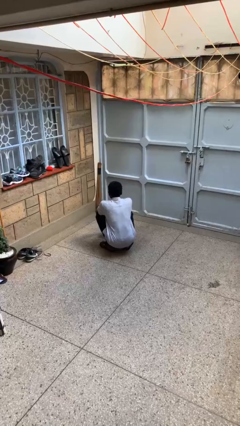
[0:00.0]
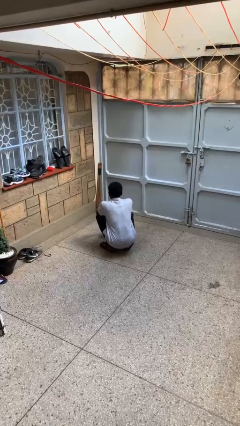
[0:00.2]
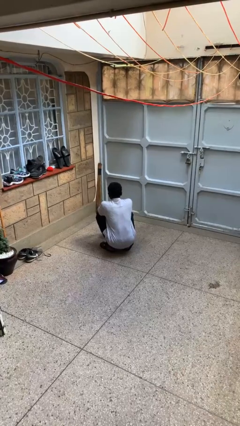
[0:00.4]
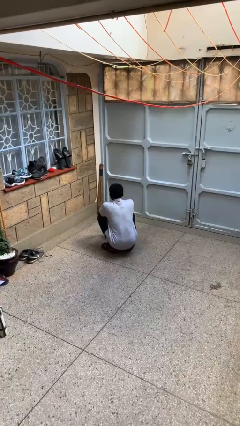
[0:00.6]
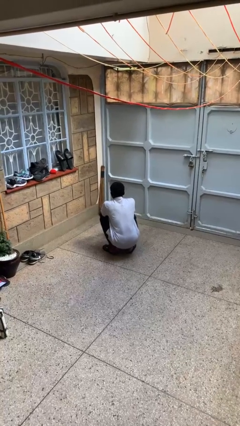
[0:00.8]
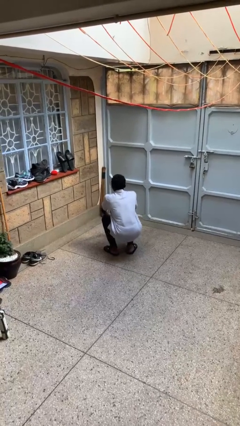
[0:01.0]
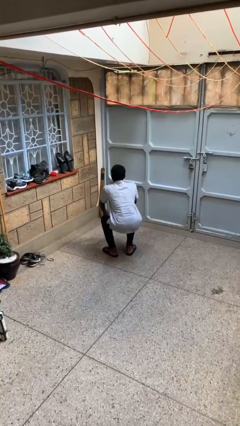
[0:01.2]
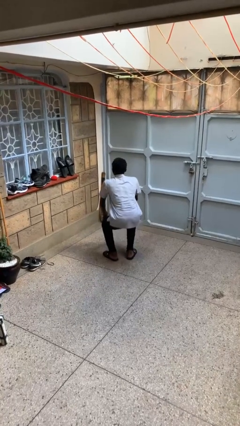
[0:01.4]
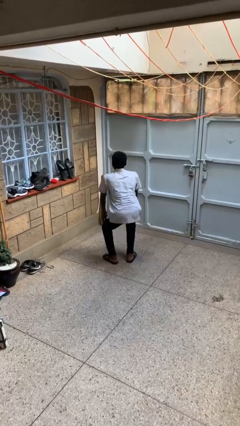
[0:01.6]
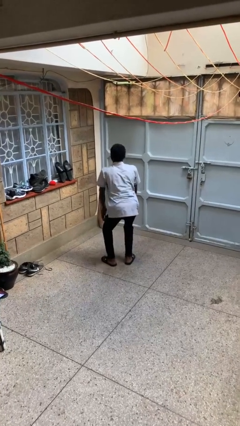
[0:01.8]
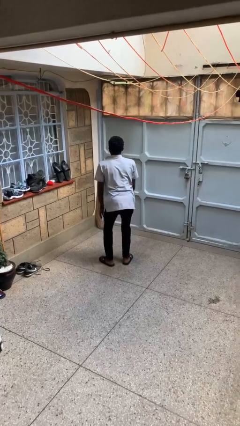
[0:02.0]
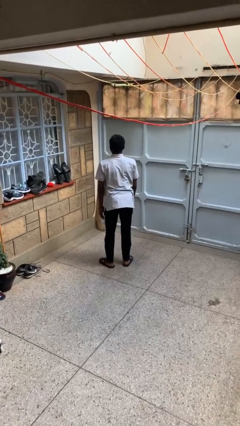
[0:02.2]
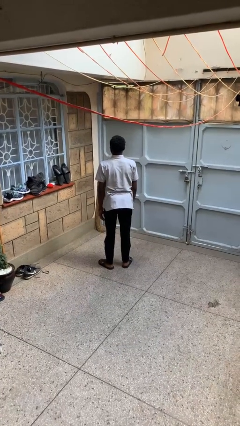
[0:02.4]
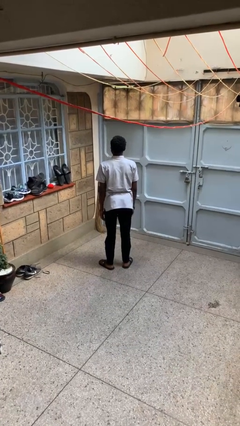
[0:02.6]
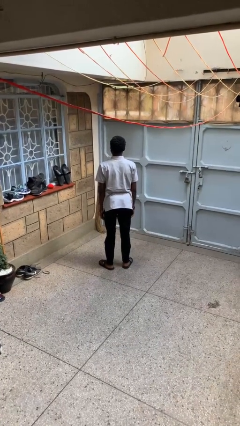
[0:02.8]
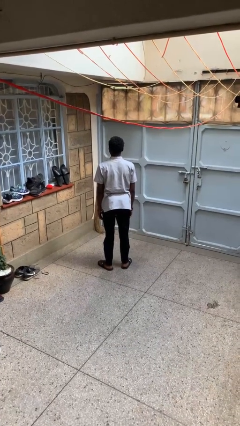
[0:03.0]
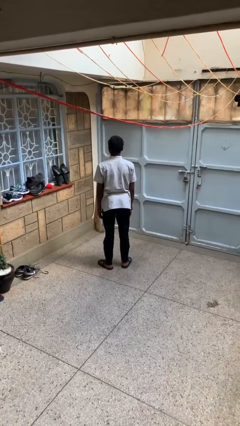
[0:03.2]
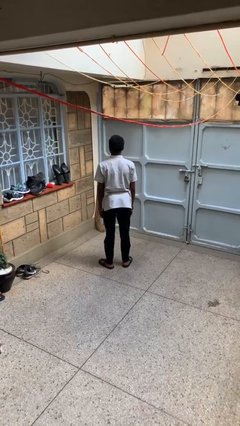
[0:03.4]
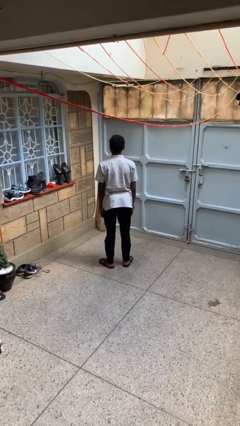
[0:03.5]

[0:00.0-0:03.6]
person stands up

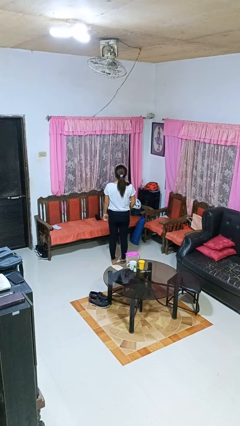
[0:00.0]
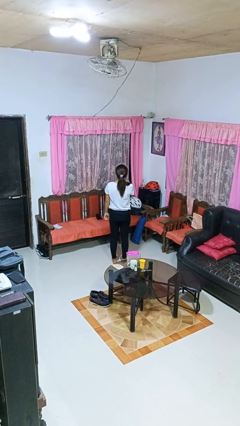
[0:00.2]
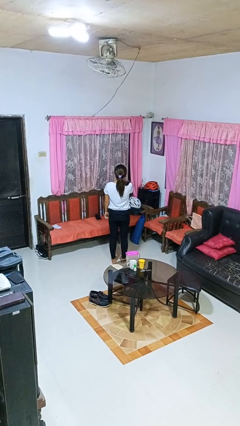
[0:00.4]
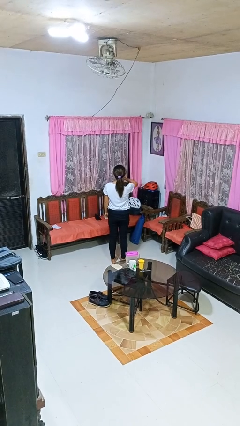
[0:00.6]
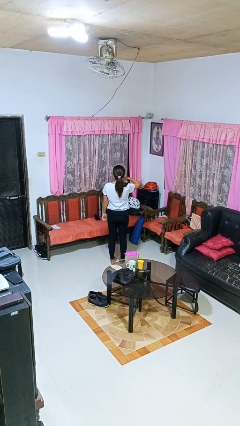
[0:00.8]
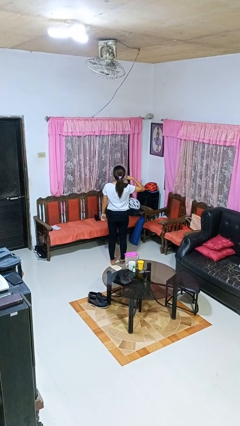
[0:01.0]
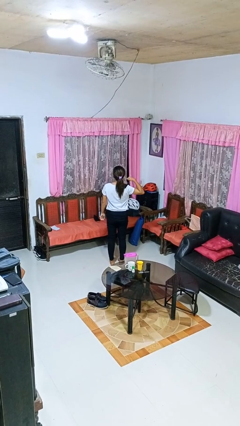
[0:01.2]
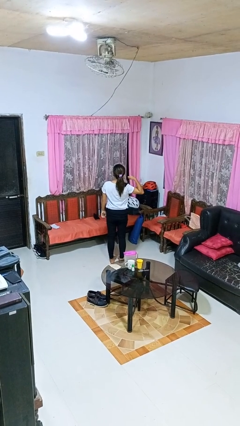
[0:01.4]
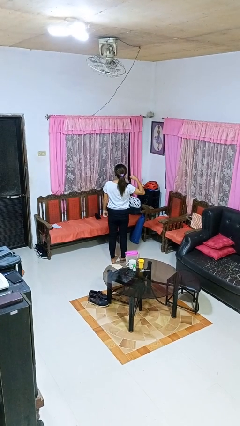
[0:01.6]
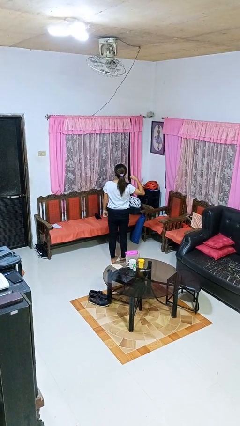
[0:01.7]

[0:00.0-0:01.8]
person gestures cut

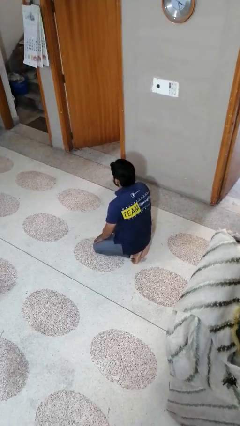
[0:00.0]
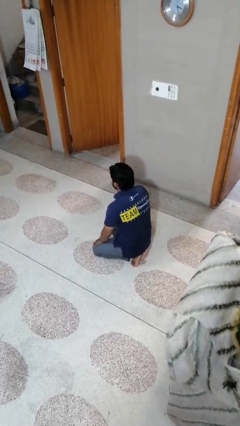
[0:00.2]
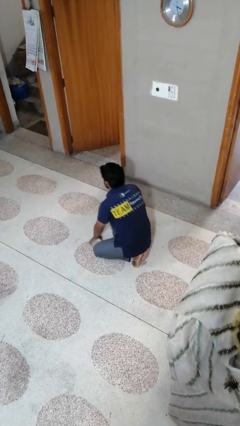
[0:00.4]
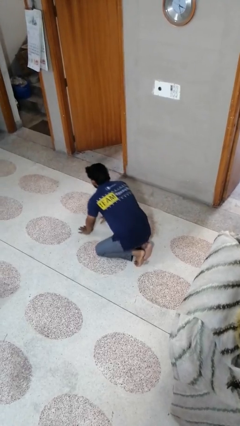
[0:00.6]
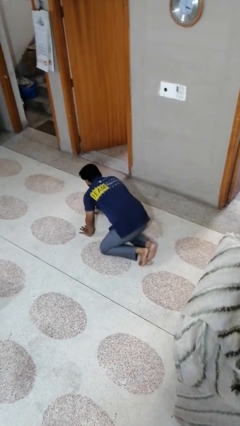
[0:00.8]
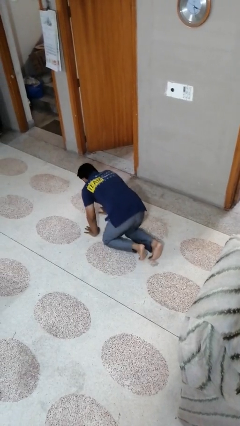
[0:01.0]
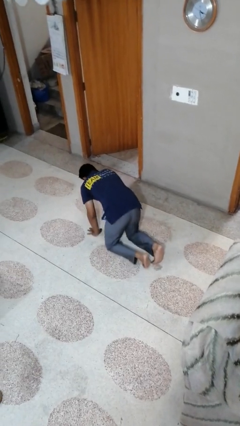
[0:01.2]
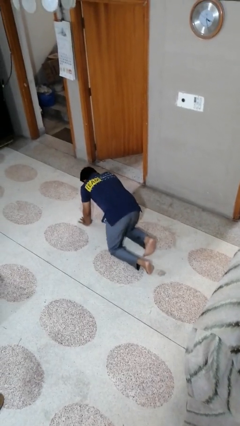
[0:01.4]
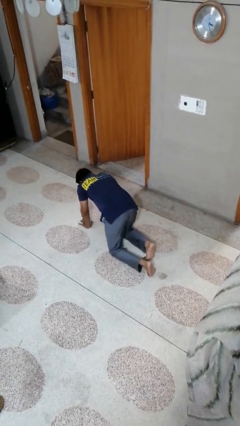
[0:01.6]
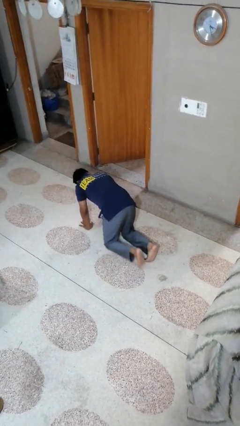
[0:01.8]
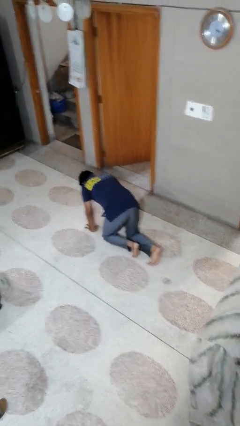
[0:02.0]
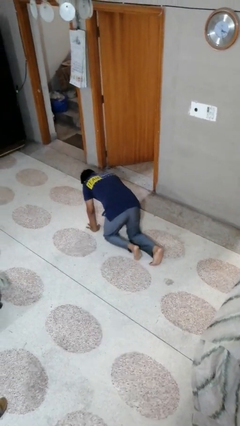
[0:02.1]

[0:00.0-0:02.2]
person crawls

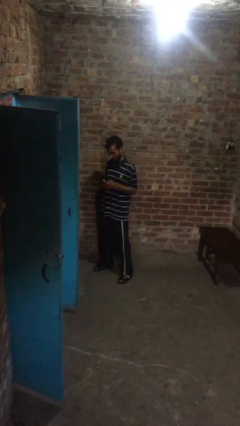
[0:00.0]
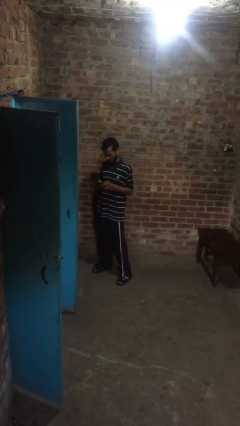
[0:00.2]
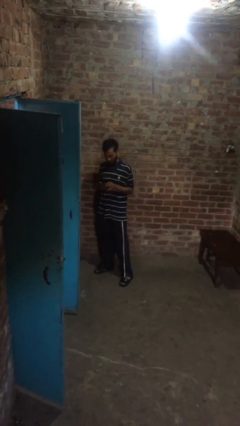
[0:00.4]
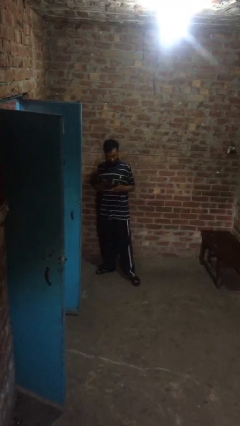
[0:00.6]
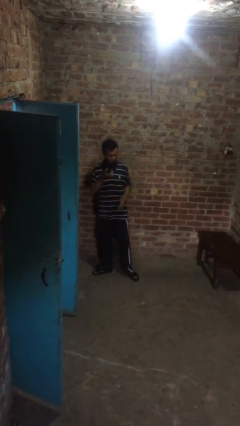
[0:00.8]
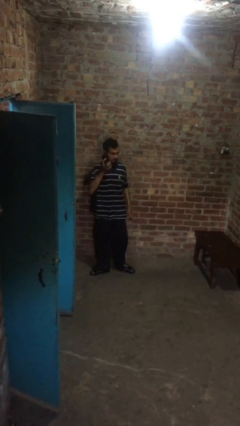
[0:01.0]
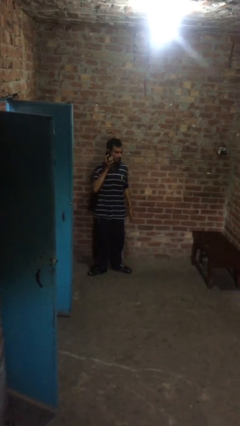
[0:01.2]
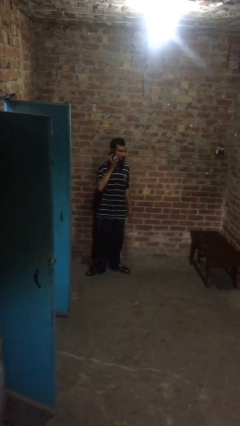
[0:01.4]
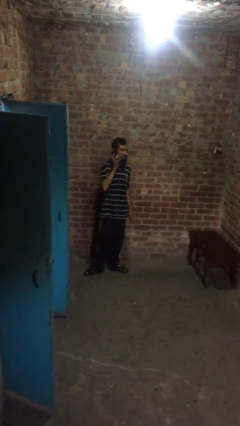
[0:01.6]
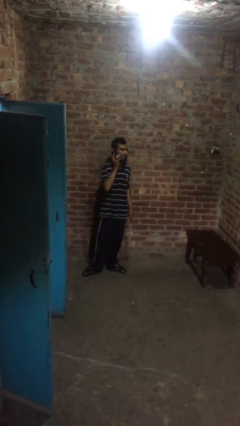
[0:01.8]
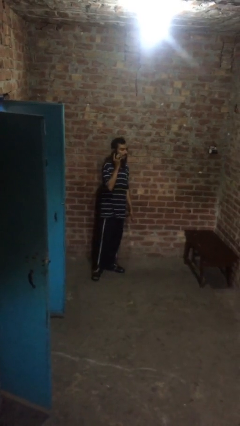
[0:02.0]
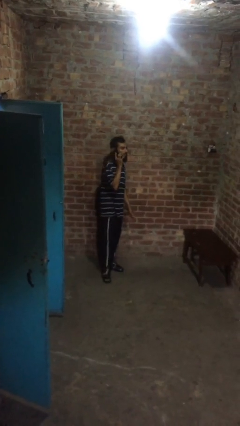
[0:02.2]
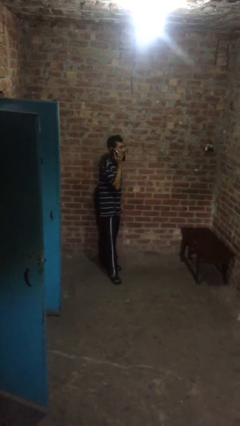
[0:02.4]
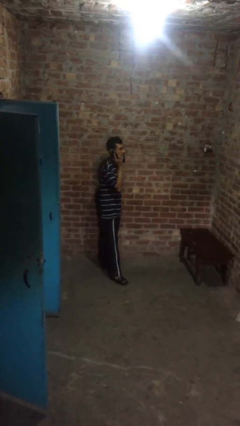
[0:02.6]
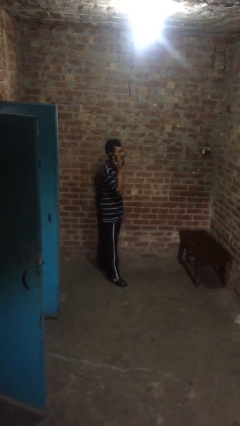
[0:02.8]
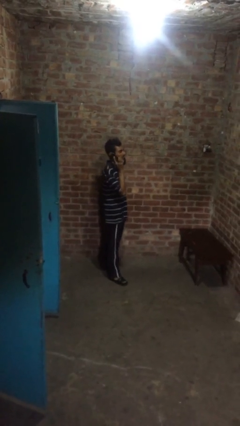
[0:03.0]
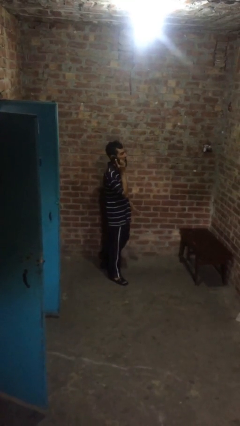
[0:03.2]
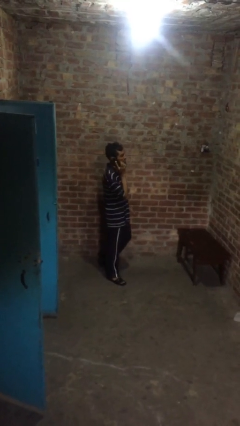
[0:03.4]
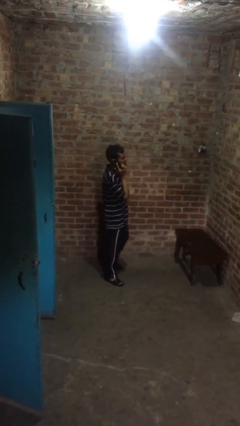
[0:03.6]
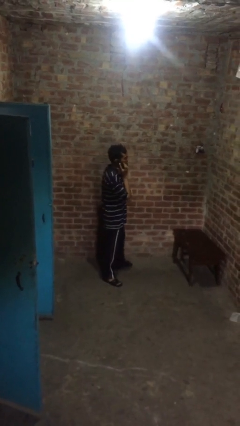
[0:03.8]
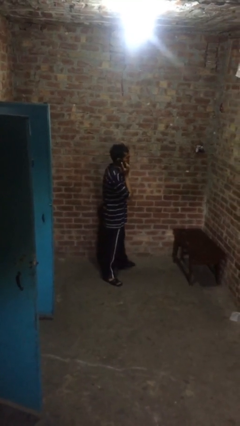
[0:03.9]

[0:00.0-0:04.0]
person talks on phone

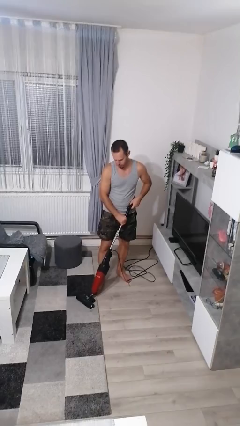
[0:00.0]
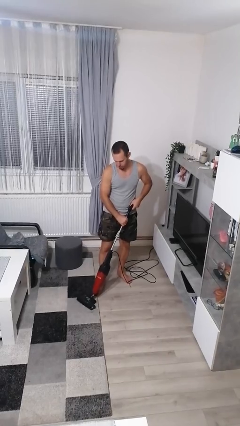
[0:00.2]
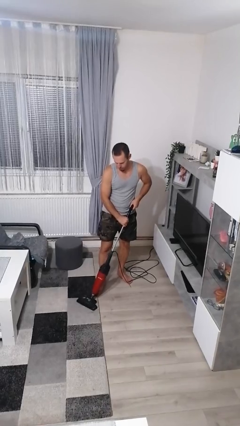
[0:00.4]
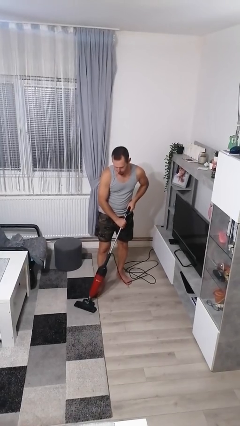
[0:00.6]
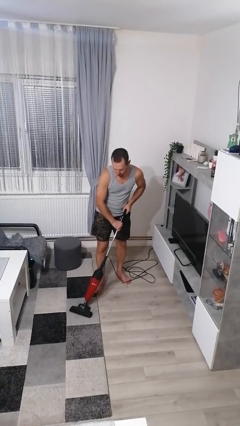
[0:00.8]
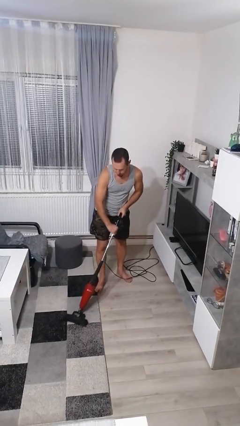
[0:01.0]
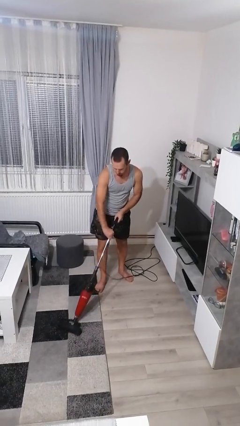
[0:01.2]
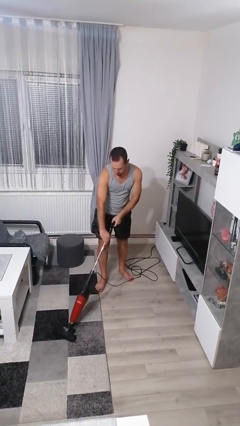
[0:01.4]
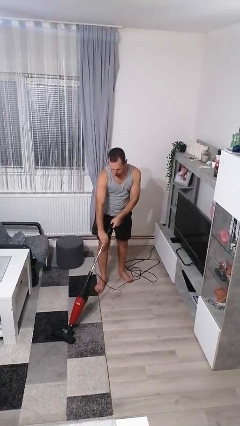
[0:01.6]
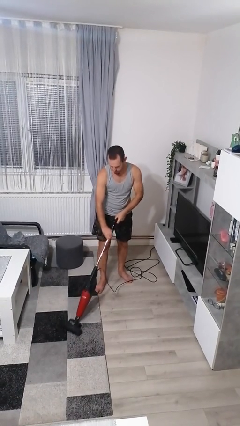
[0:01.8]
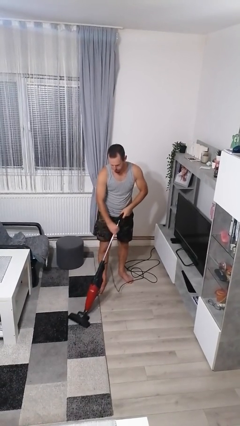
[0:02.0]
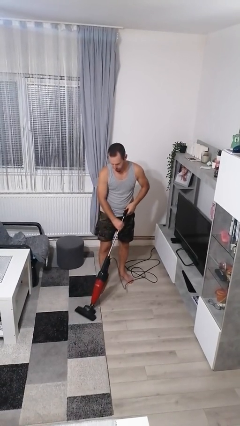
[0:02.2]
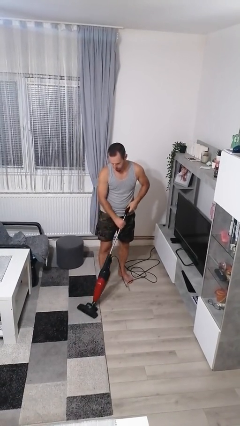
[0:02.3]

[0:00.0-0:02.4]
person vacuums carpet

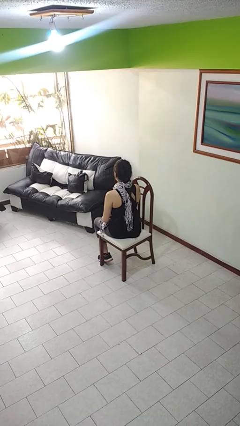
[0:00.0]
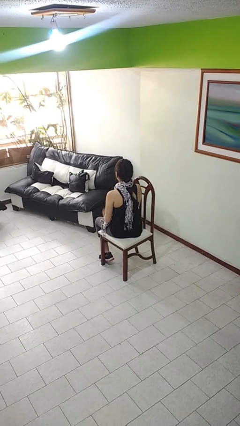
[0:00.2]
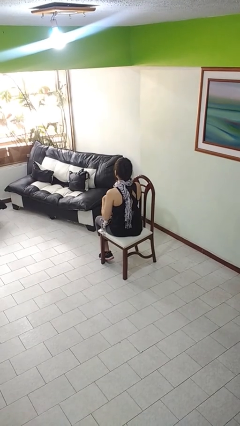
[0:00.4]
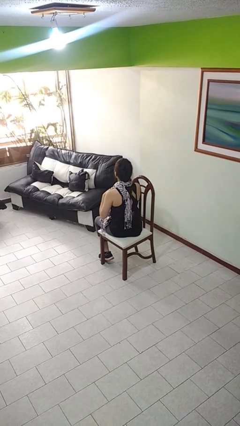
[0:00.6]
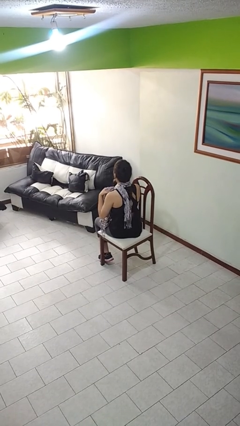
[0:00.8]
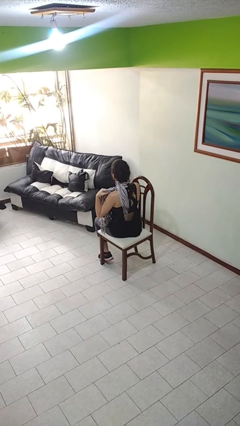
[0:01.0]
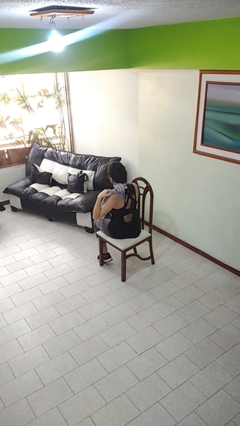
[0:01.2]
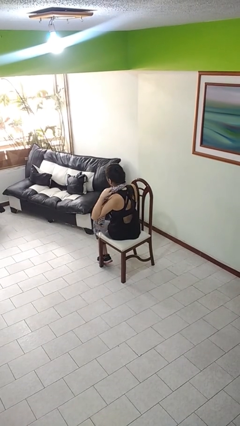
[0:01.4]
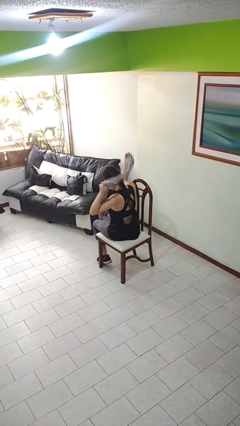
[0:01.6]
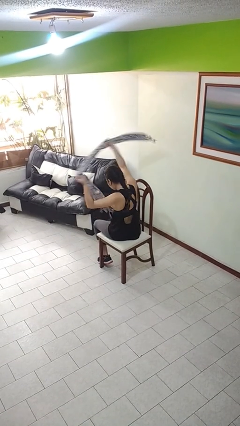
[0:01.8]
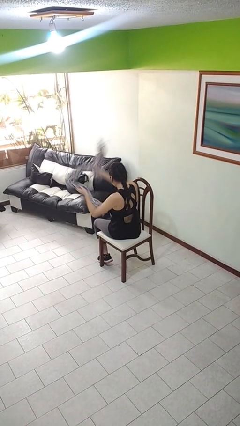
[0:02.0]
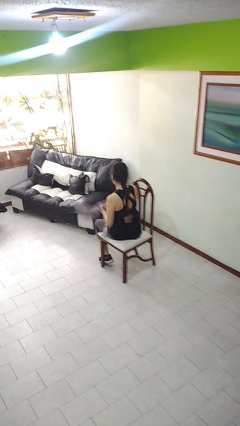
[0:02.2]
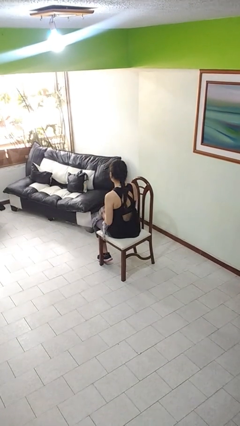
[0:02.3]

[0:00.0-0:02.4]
person takes off scarf

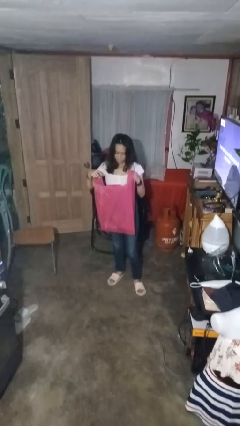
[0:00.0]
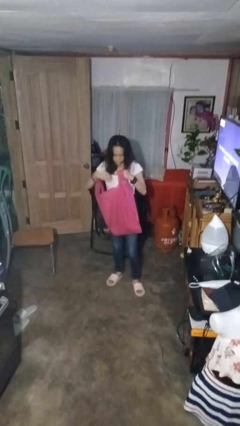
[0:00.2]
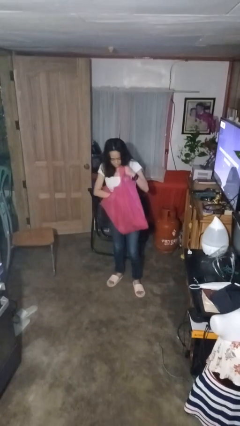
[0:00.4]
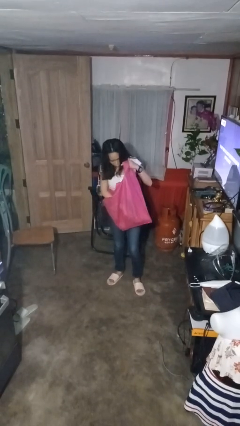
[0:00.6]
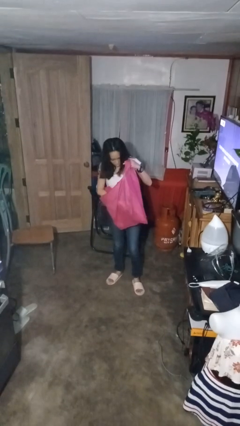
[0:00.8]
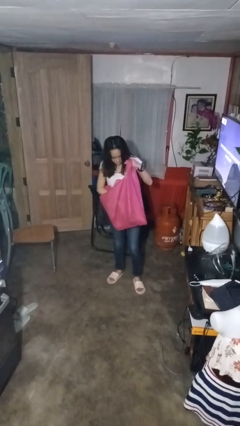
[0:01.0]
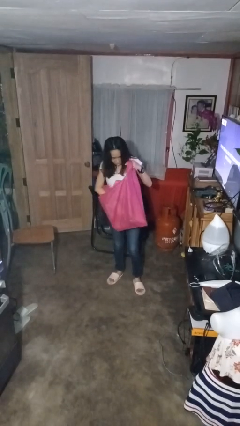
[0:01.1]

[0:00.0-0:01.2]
person searches in bag
